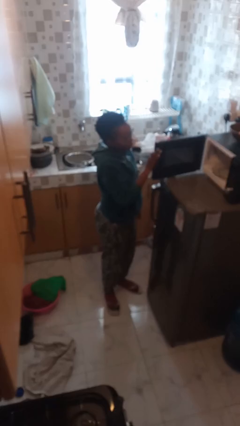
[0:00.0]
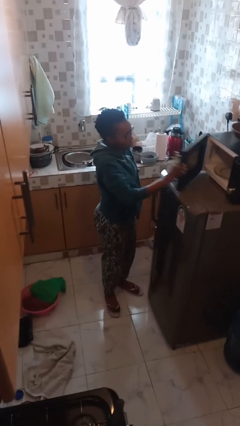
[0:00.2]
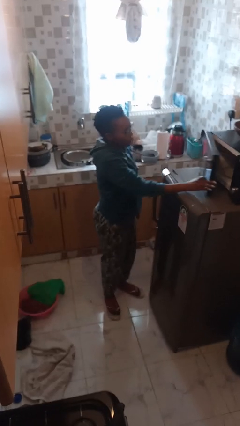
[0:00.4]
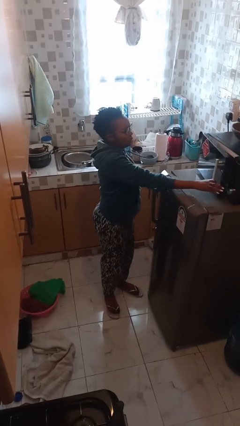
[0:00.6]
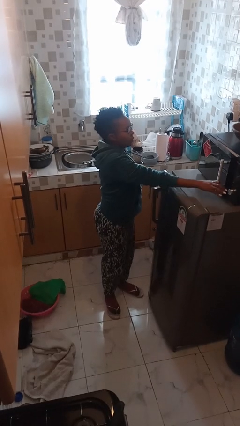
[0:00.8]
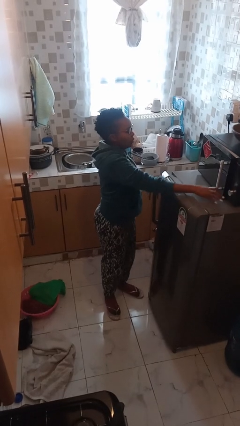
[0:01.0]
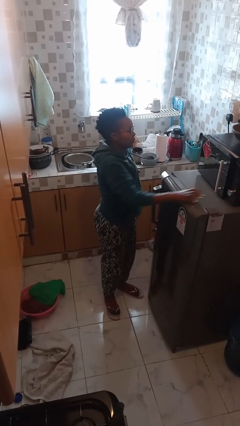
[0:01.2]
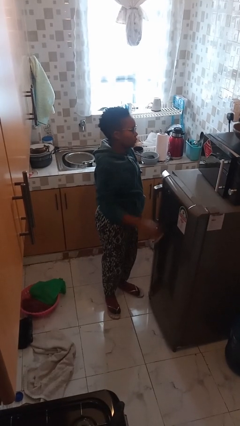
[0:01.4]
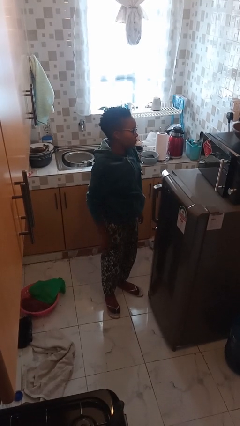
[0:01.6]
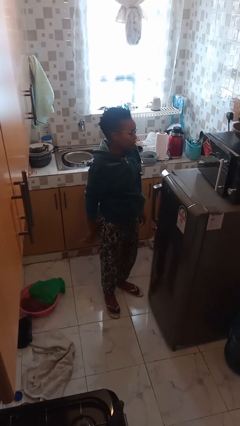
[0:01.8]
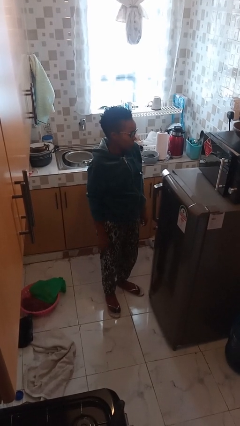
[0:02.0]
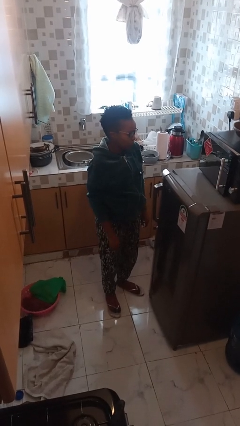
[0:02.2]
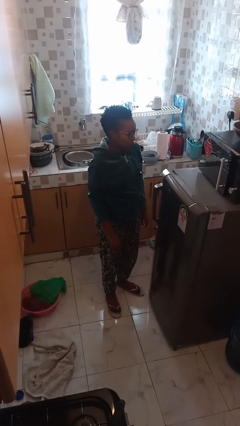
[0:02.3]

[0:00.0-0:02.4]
person closes microwave

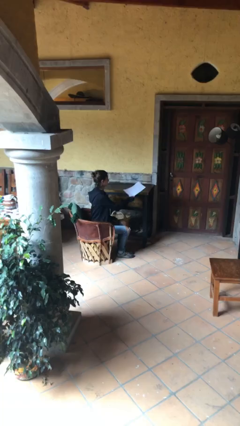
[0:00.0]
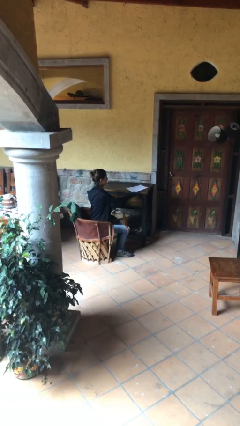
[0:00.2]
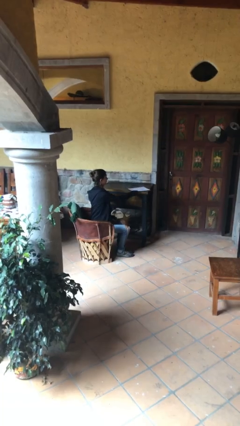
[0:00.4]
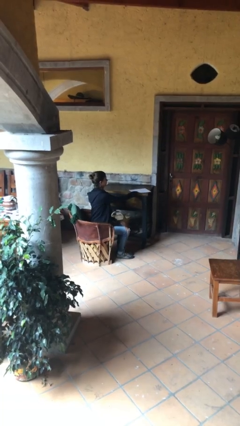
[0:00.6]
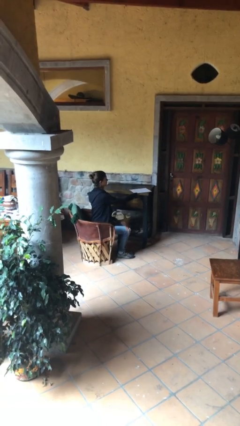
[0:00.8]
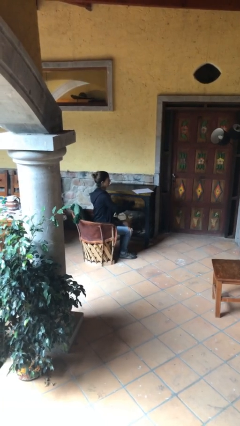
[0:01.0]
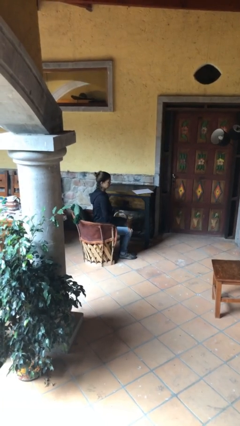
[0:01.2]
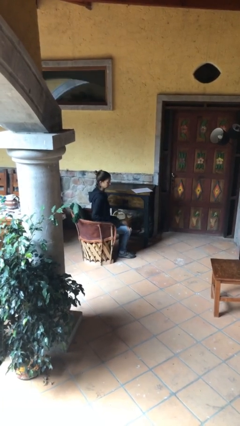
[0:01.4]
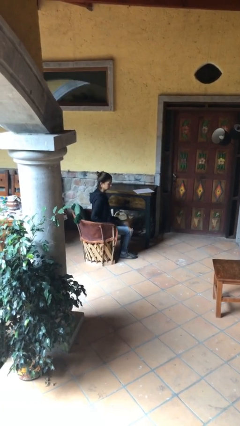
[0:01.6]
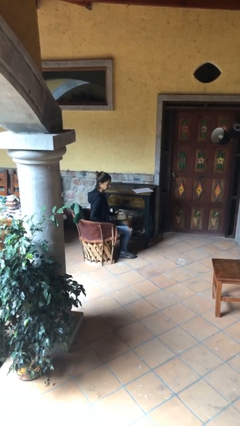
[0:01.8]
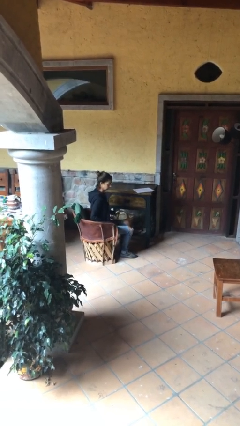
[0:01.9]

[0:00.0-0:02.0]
person puts down object on table

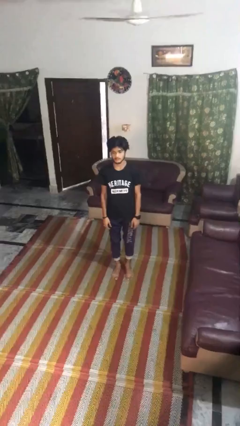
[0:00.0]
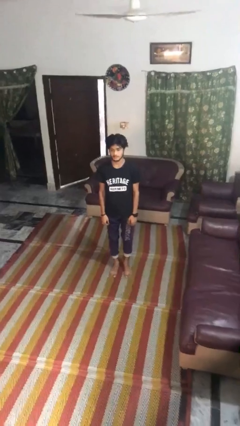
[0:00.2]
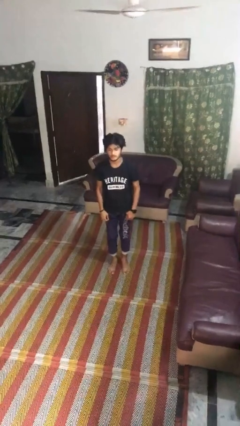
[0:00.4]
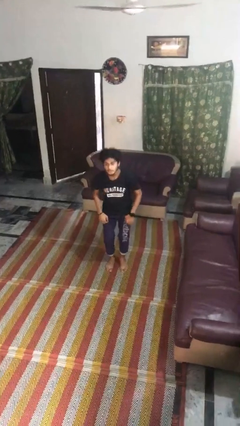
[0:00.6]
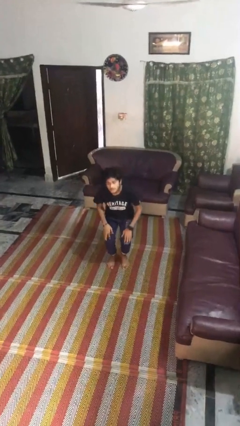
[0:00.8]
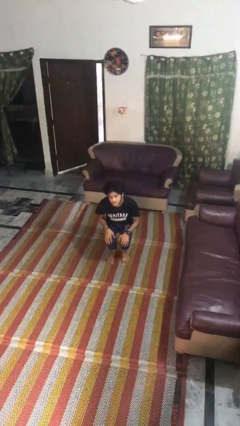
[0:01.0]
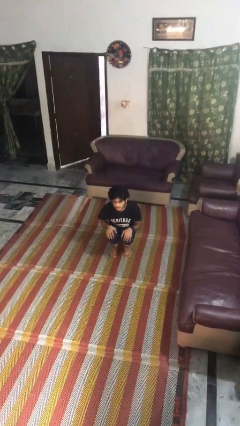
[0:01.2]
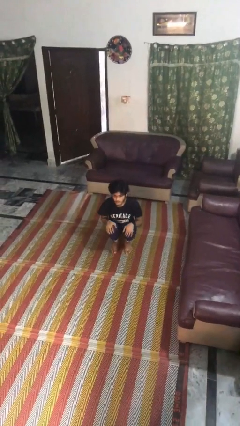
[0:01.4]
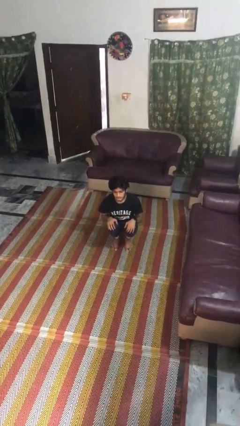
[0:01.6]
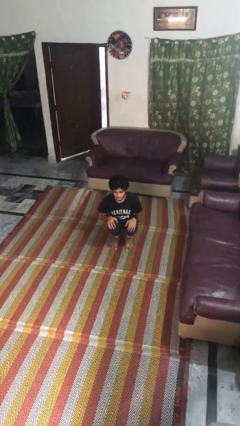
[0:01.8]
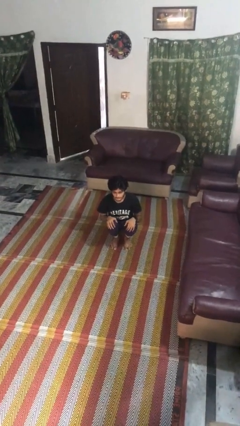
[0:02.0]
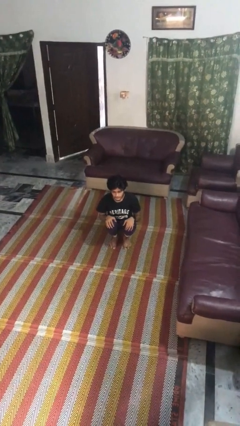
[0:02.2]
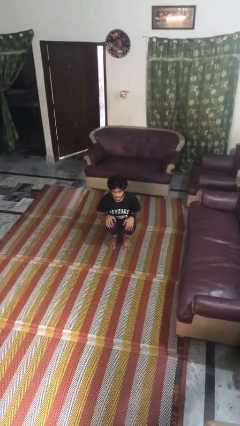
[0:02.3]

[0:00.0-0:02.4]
person squats

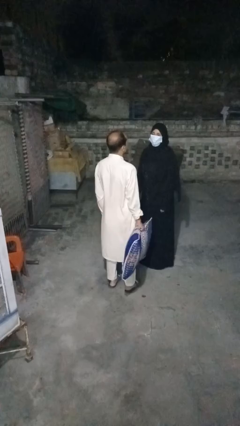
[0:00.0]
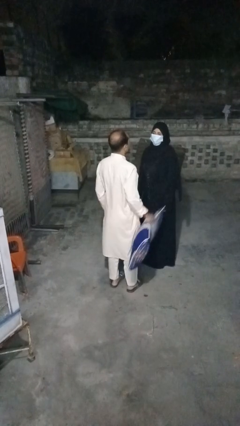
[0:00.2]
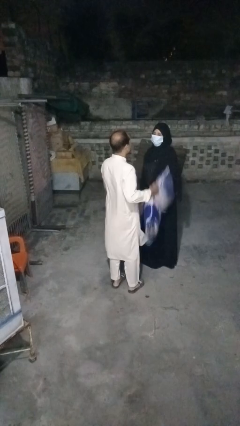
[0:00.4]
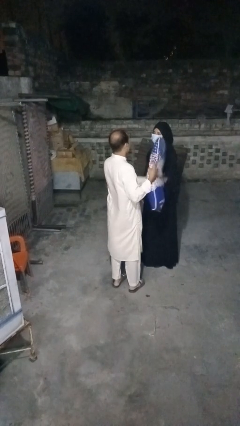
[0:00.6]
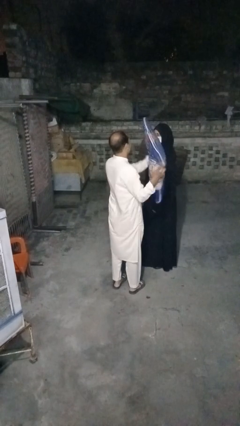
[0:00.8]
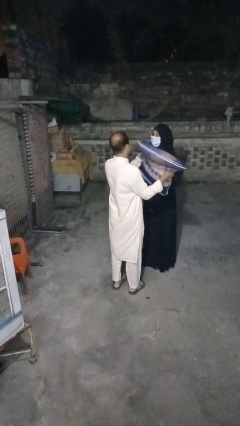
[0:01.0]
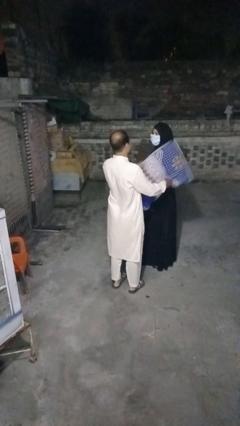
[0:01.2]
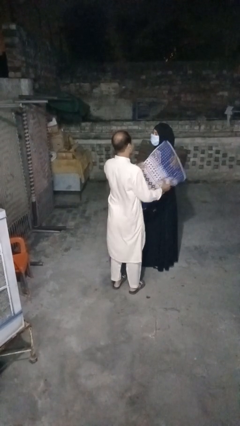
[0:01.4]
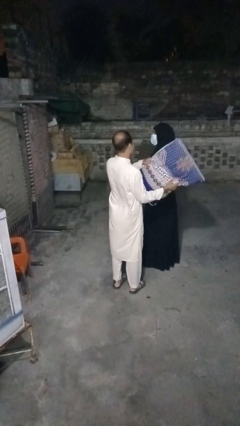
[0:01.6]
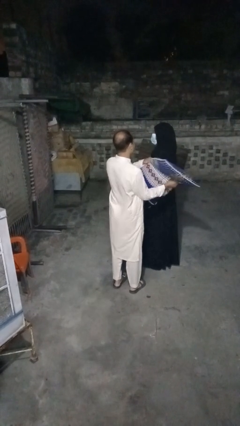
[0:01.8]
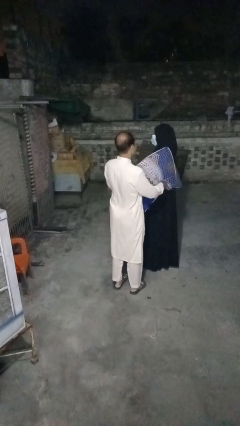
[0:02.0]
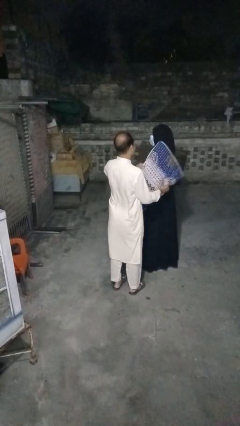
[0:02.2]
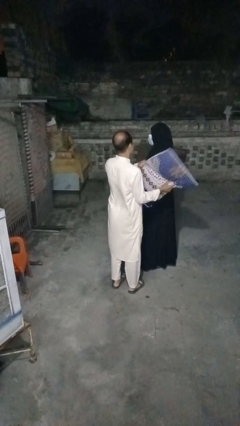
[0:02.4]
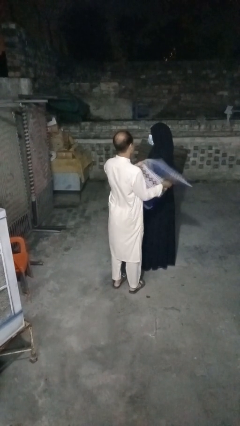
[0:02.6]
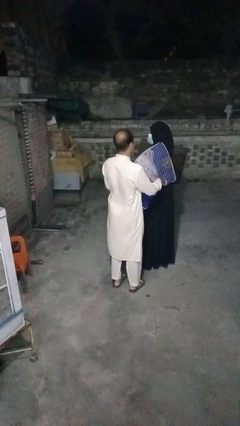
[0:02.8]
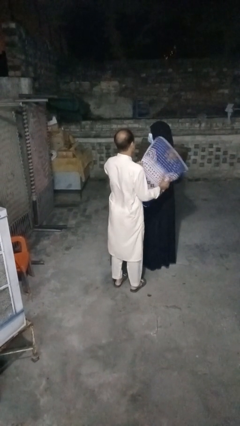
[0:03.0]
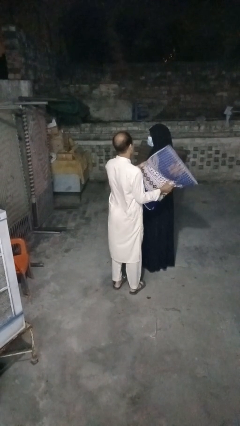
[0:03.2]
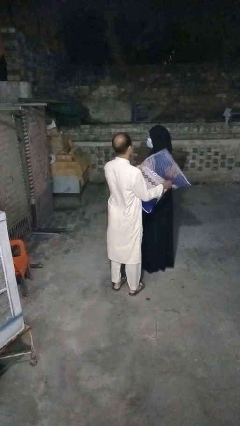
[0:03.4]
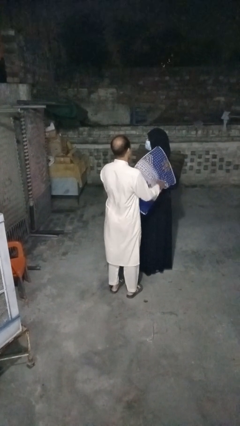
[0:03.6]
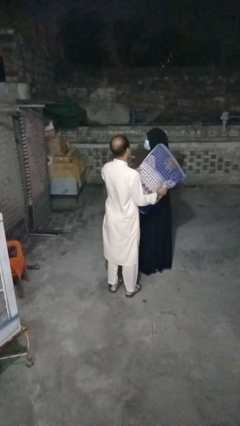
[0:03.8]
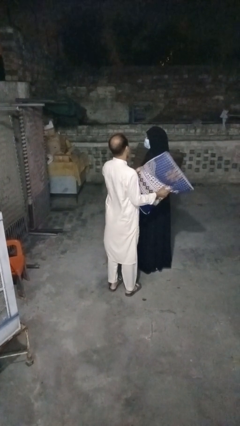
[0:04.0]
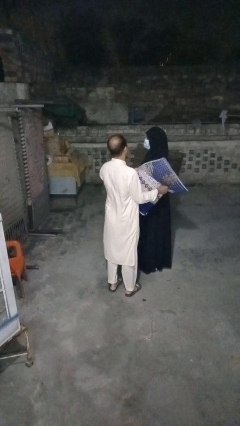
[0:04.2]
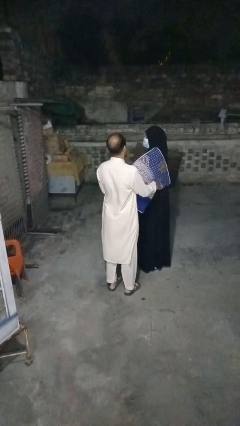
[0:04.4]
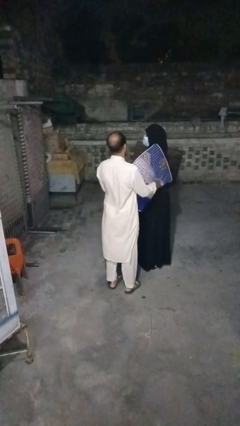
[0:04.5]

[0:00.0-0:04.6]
person hits person with pillow

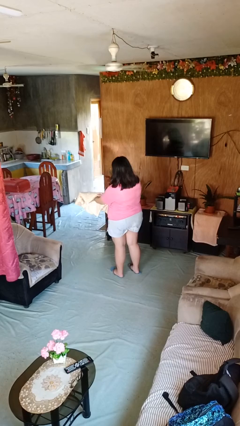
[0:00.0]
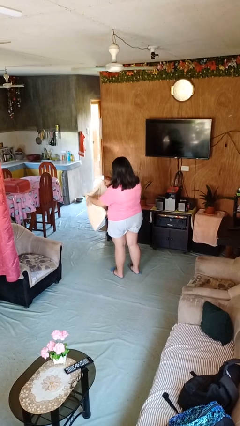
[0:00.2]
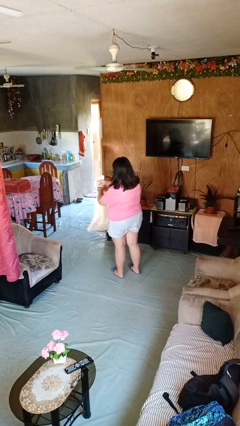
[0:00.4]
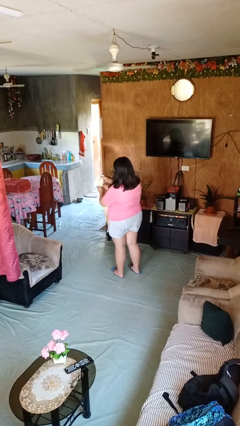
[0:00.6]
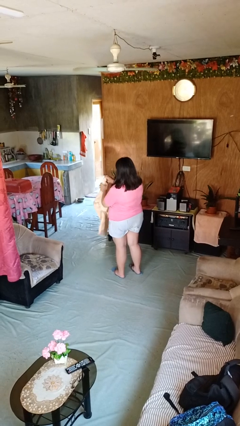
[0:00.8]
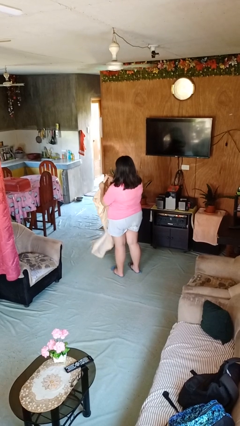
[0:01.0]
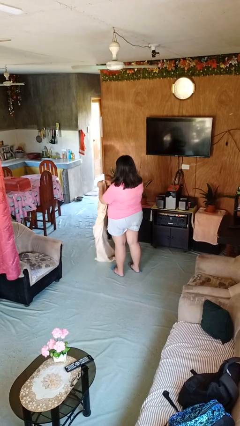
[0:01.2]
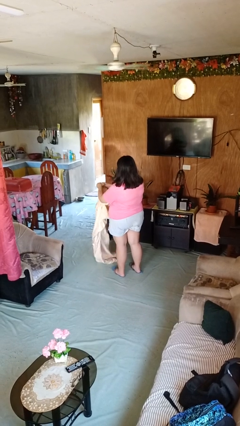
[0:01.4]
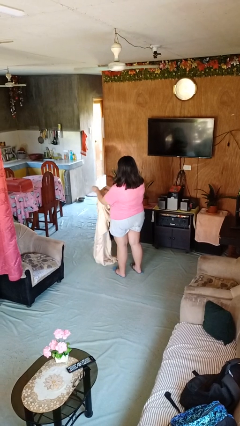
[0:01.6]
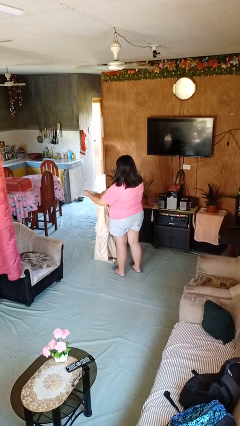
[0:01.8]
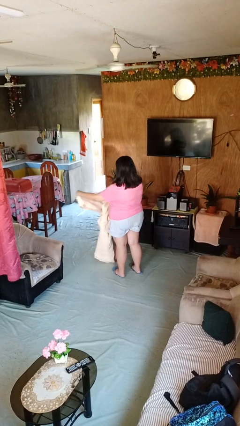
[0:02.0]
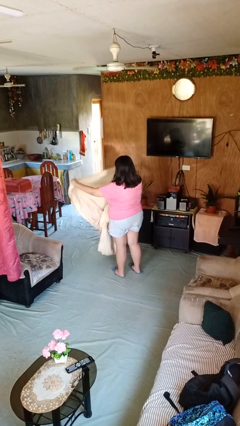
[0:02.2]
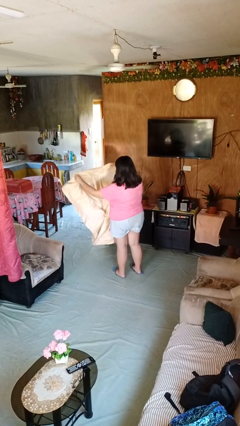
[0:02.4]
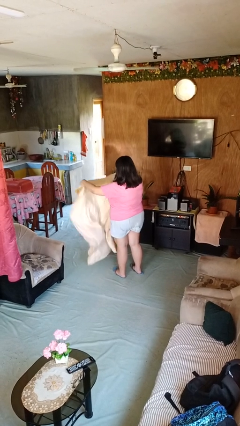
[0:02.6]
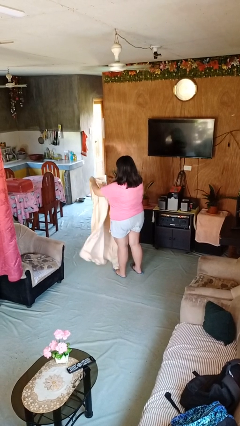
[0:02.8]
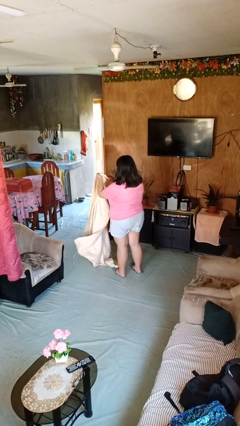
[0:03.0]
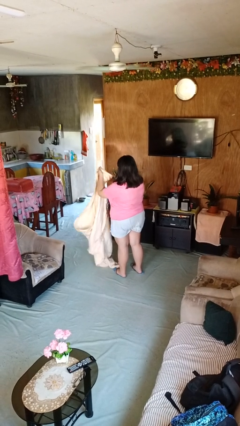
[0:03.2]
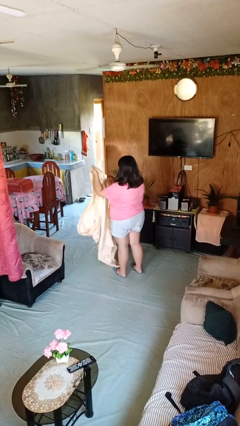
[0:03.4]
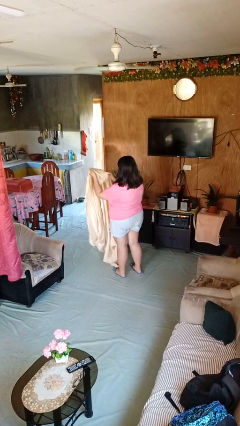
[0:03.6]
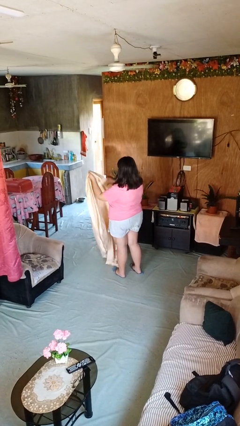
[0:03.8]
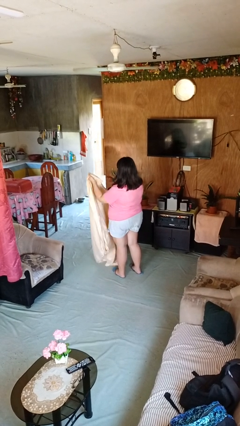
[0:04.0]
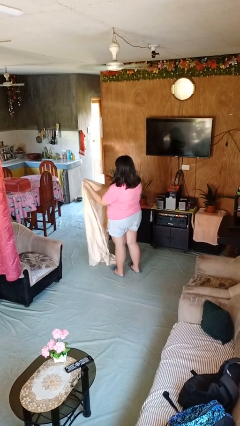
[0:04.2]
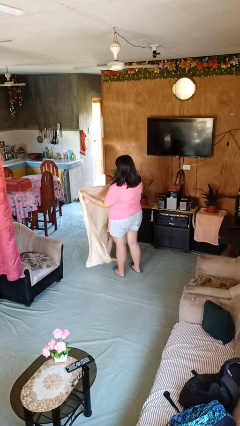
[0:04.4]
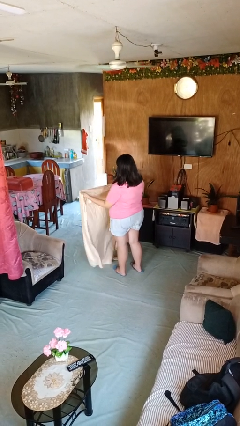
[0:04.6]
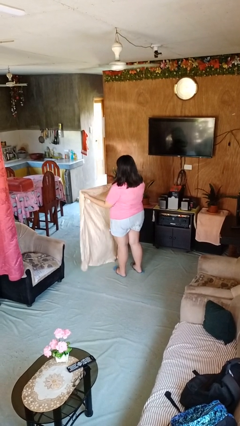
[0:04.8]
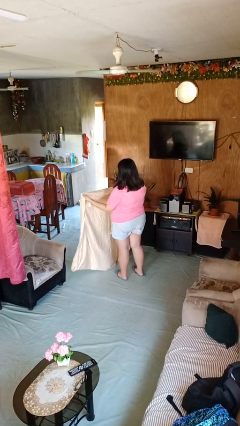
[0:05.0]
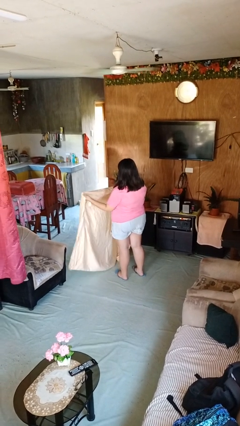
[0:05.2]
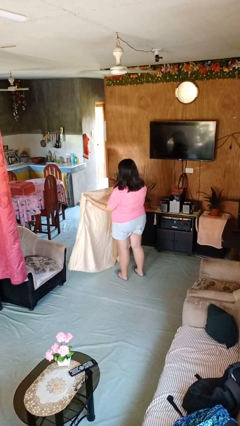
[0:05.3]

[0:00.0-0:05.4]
person unfolds blanket

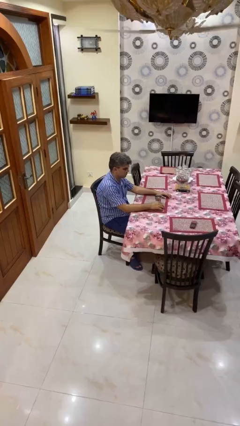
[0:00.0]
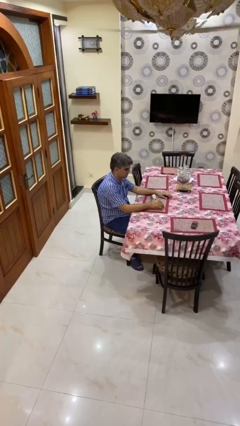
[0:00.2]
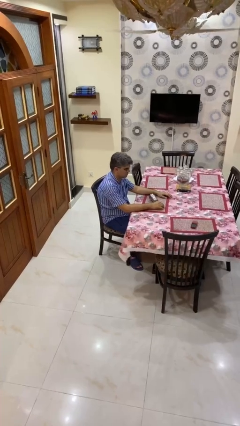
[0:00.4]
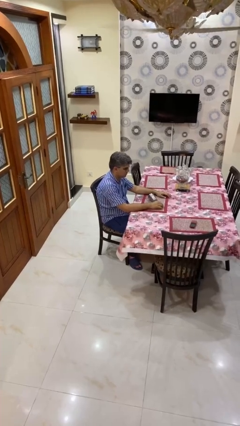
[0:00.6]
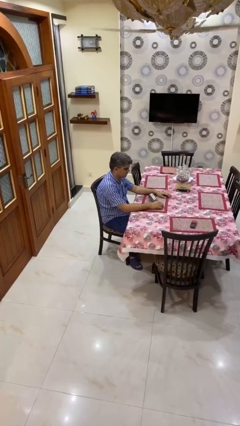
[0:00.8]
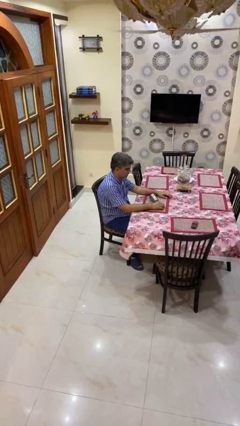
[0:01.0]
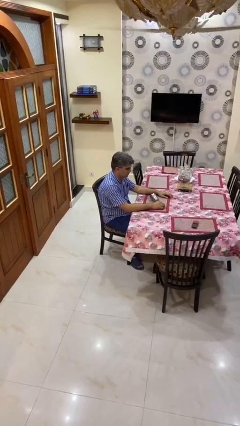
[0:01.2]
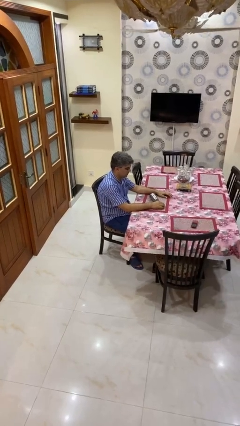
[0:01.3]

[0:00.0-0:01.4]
person knocks over glass
